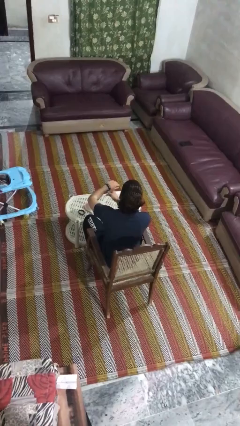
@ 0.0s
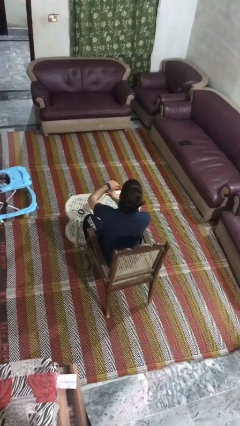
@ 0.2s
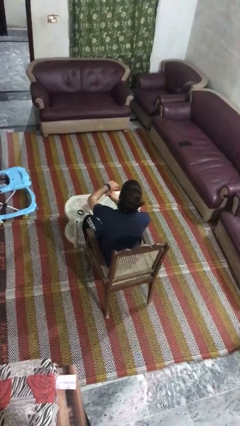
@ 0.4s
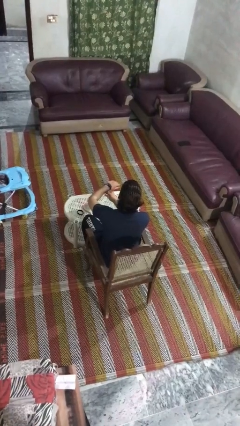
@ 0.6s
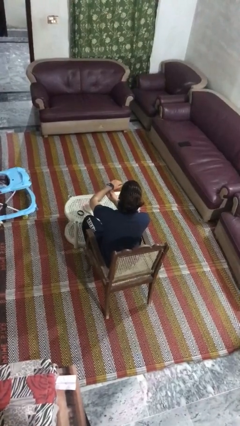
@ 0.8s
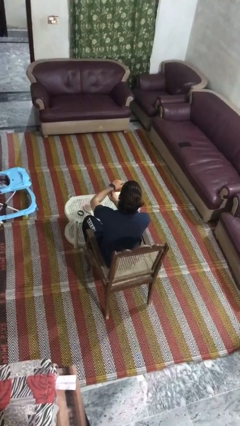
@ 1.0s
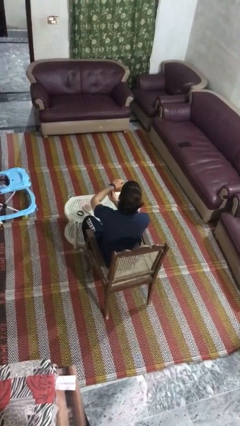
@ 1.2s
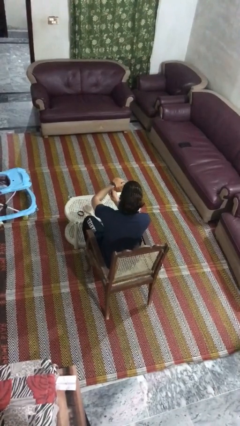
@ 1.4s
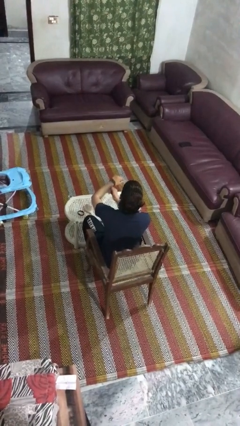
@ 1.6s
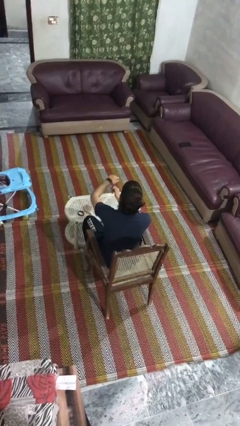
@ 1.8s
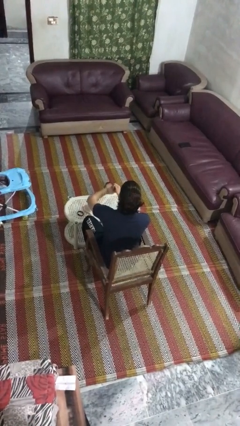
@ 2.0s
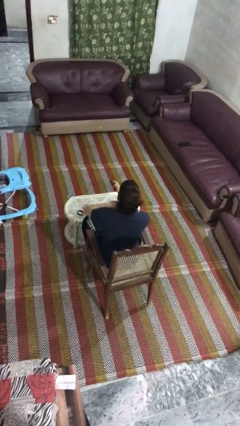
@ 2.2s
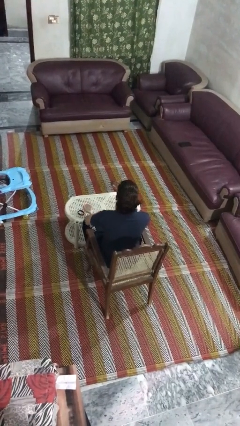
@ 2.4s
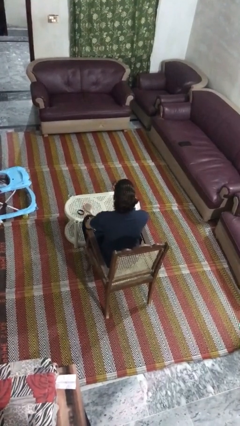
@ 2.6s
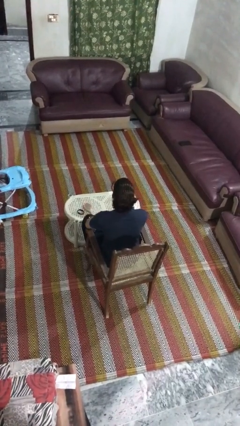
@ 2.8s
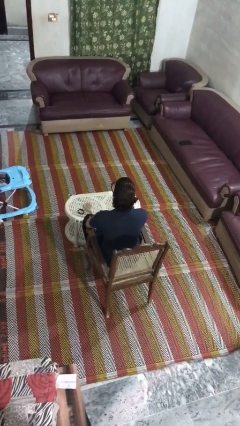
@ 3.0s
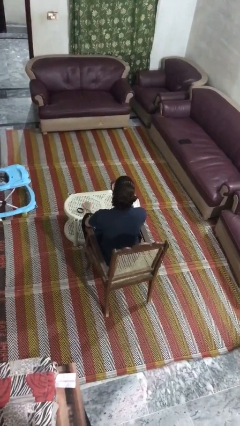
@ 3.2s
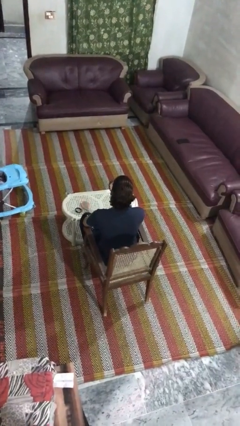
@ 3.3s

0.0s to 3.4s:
person takes off wristwatch

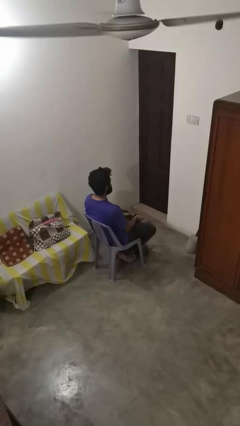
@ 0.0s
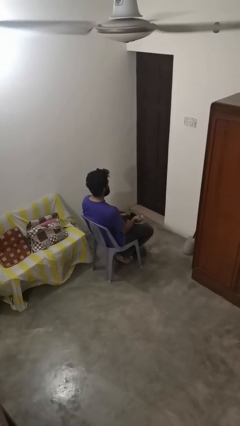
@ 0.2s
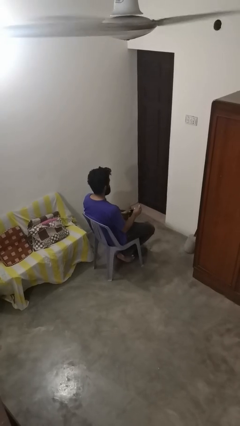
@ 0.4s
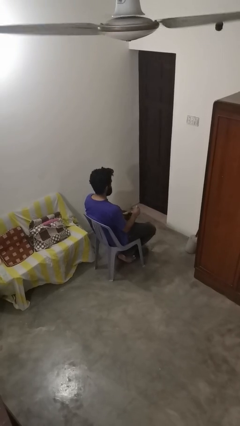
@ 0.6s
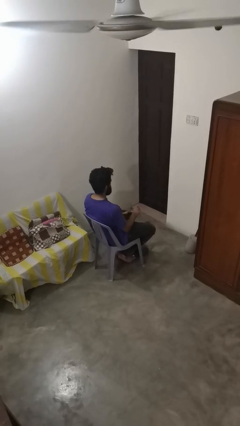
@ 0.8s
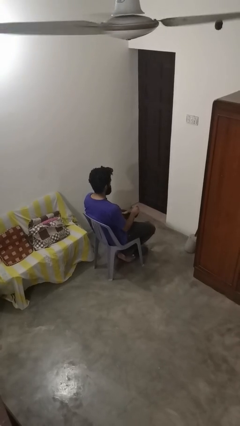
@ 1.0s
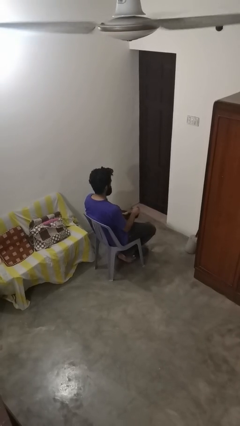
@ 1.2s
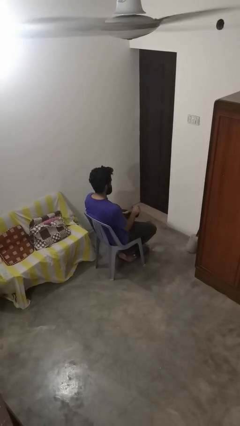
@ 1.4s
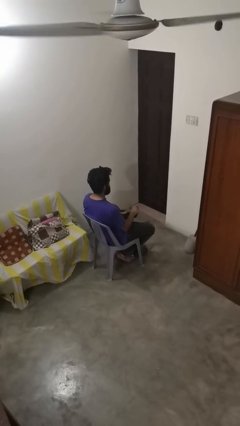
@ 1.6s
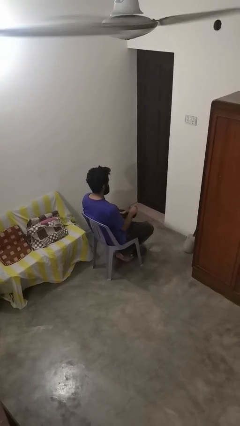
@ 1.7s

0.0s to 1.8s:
person stirs mug

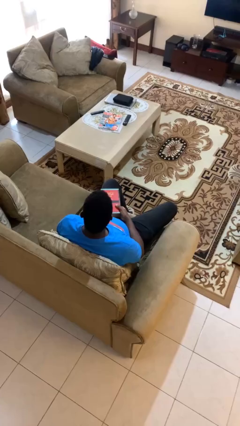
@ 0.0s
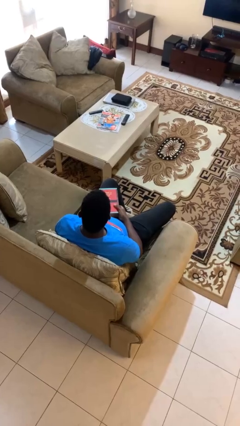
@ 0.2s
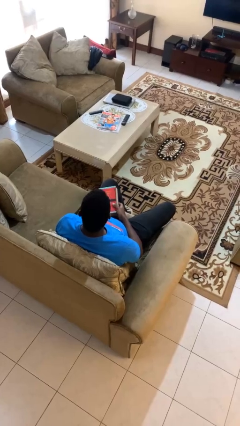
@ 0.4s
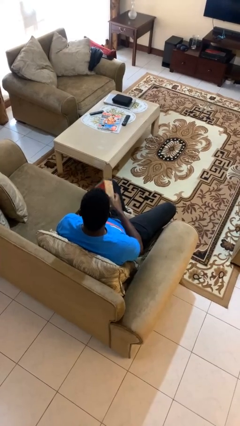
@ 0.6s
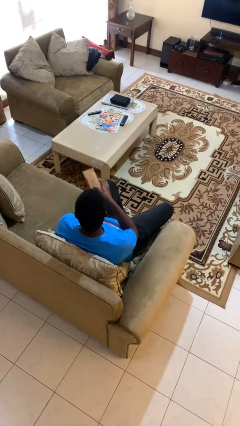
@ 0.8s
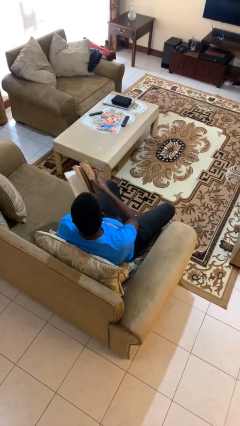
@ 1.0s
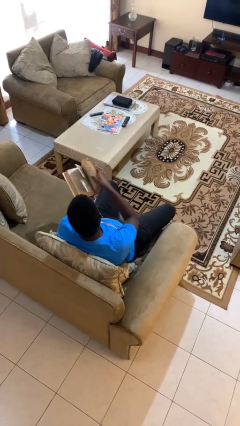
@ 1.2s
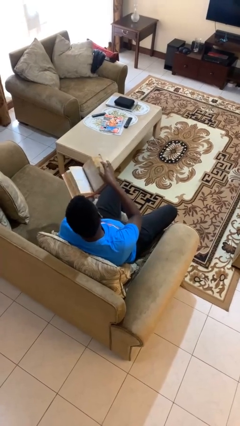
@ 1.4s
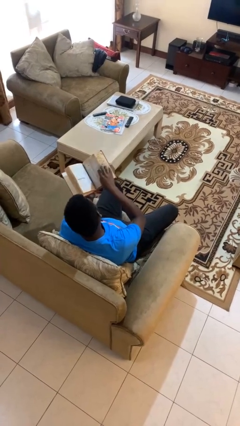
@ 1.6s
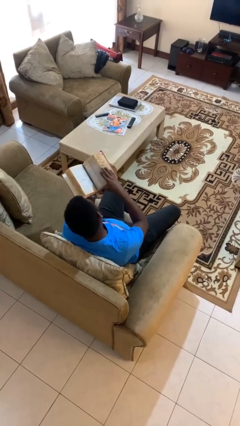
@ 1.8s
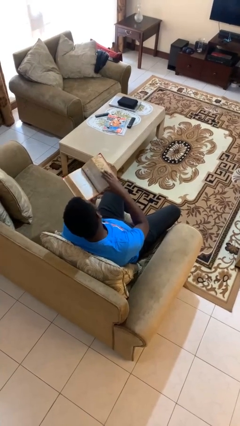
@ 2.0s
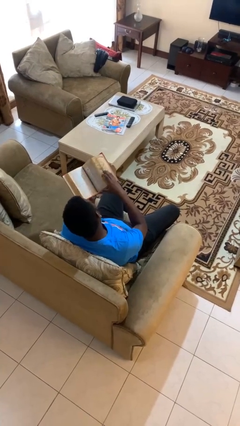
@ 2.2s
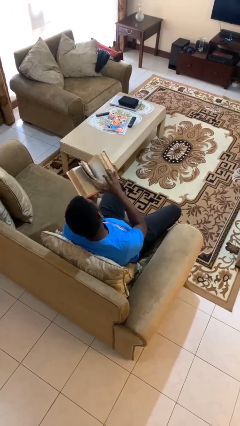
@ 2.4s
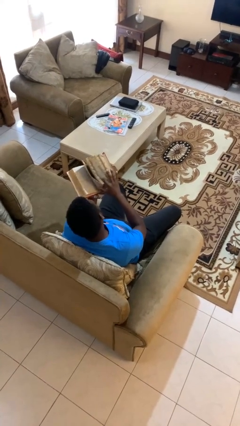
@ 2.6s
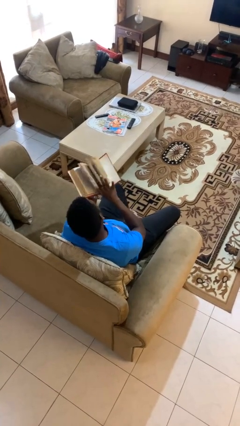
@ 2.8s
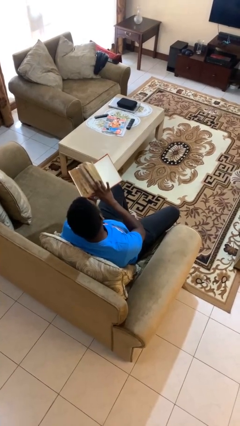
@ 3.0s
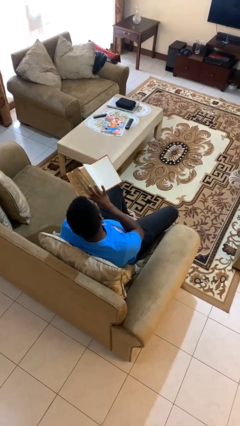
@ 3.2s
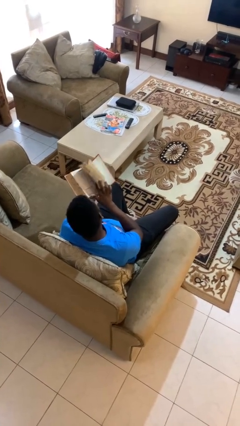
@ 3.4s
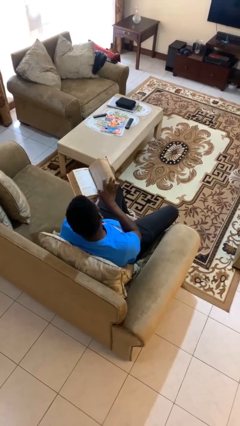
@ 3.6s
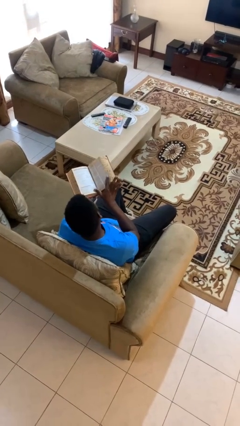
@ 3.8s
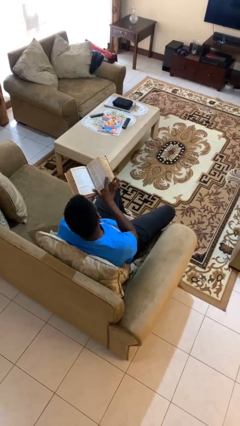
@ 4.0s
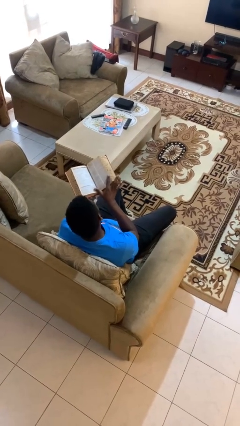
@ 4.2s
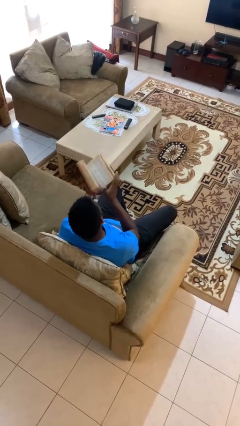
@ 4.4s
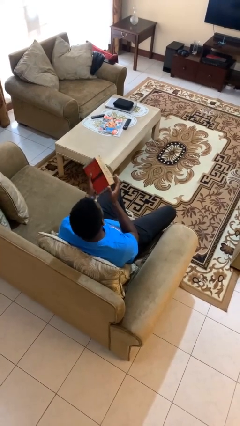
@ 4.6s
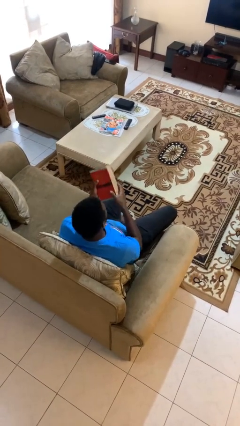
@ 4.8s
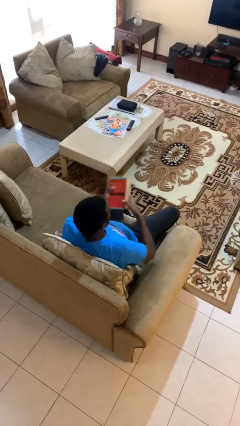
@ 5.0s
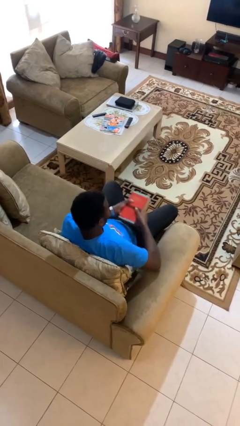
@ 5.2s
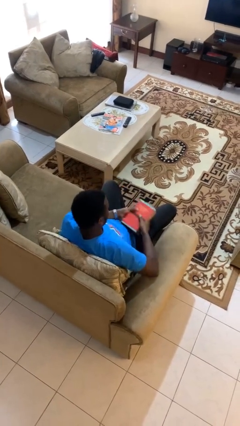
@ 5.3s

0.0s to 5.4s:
person reads book

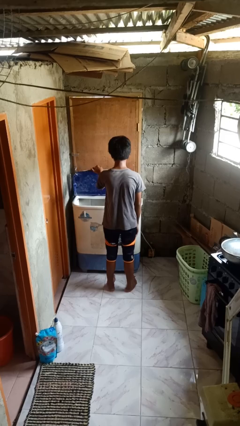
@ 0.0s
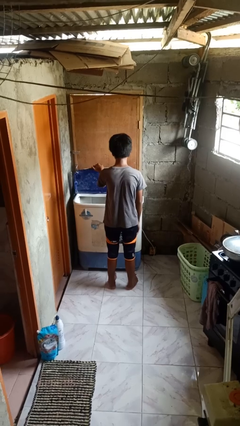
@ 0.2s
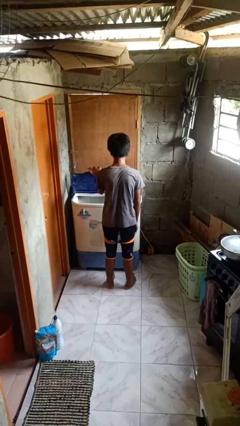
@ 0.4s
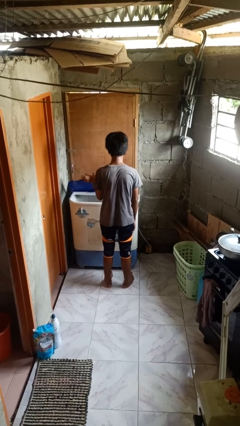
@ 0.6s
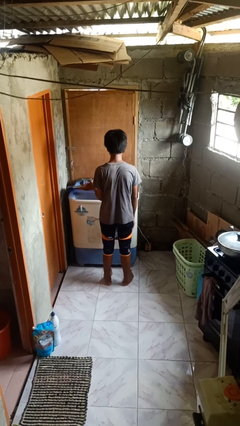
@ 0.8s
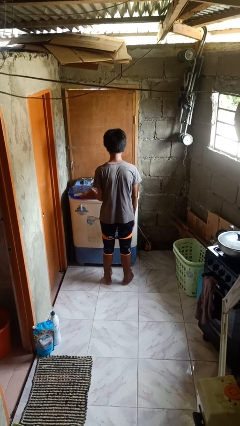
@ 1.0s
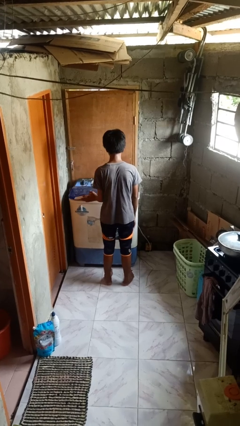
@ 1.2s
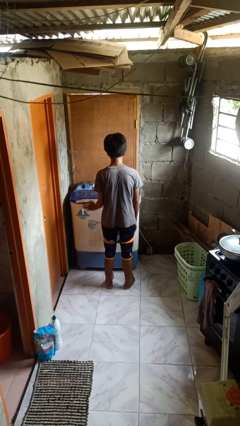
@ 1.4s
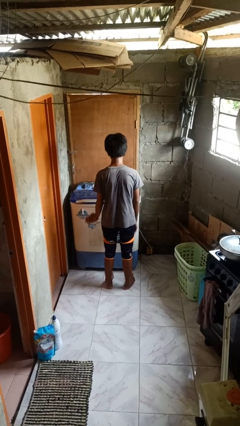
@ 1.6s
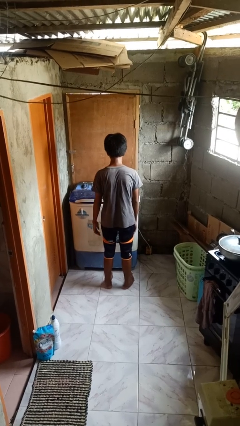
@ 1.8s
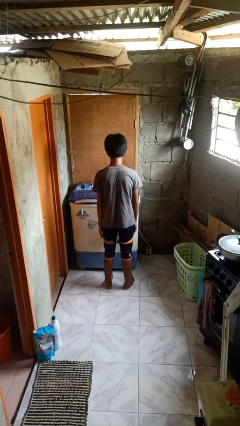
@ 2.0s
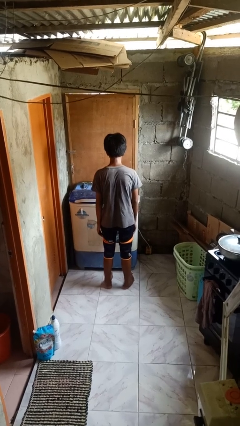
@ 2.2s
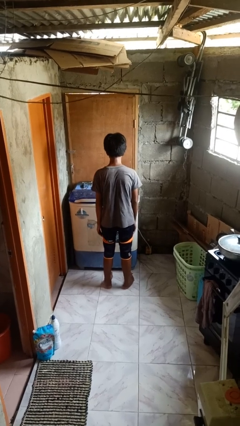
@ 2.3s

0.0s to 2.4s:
person closes clothes washer

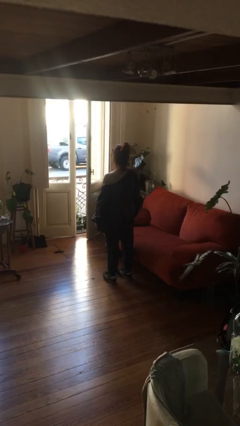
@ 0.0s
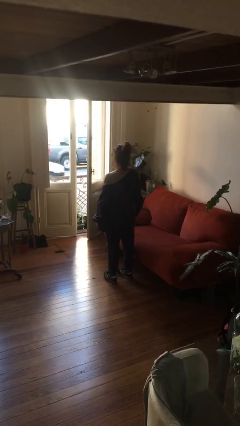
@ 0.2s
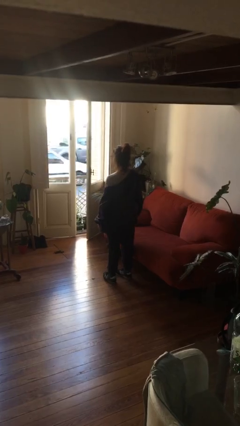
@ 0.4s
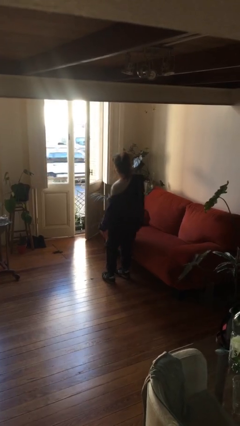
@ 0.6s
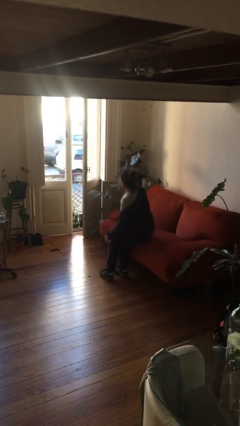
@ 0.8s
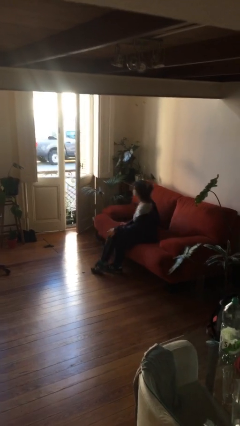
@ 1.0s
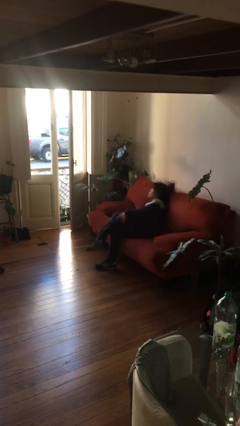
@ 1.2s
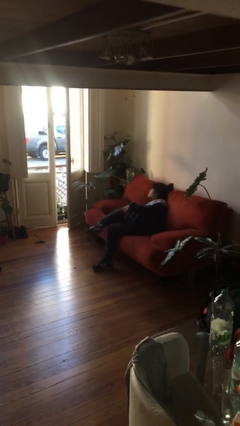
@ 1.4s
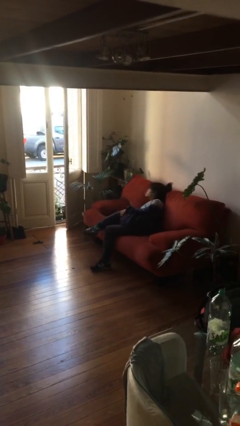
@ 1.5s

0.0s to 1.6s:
person lies down on couch

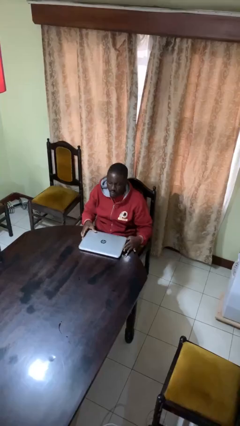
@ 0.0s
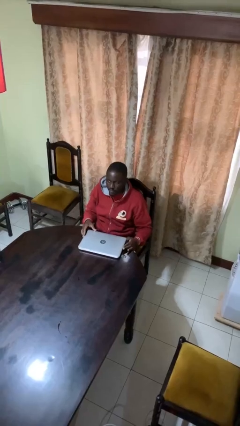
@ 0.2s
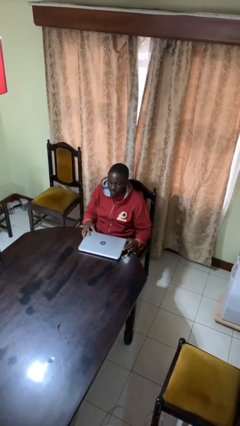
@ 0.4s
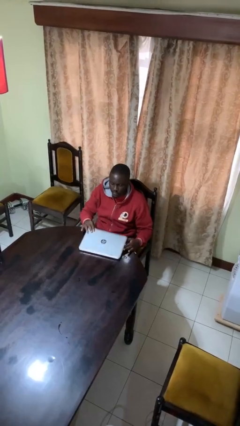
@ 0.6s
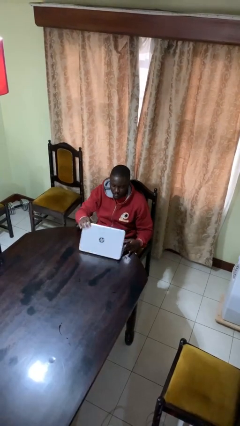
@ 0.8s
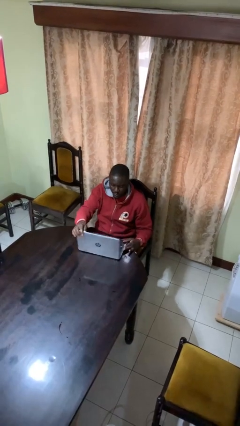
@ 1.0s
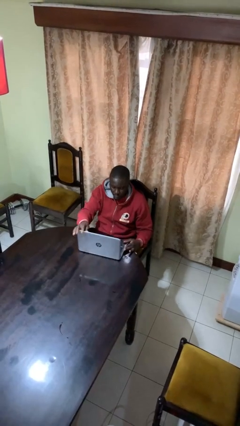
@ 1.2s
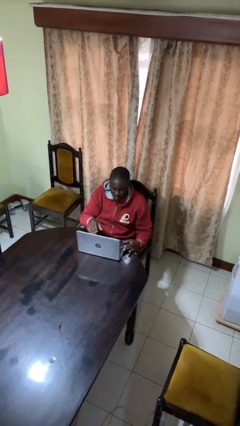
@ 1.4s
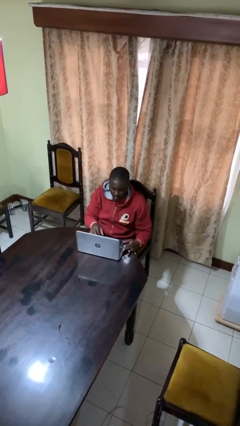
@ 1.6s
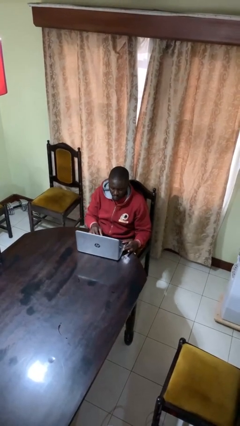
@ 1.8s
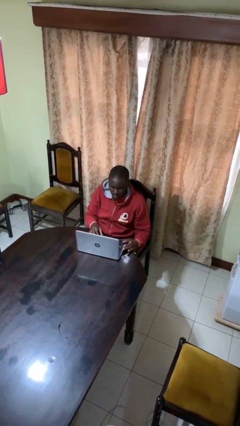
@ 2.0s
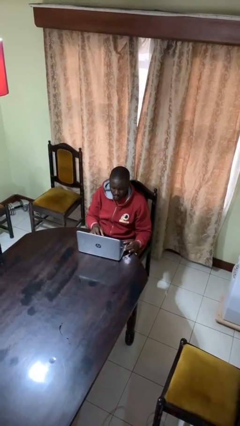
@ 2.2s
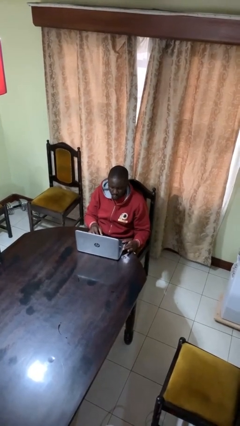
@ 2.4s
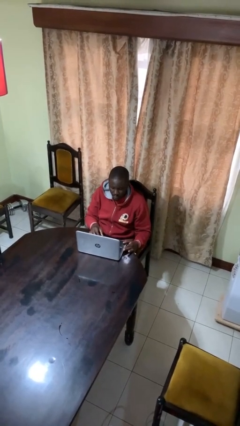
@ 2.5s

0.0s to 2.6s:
person opens laptop
